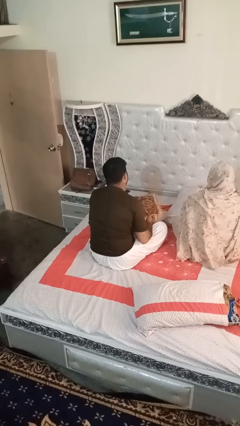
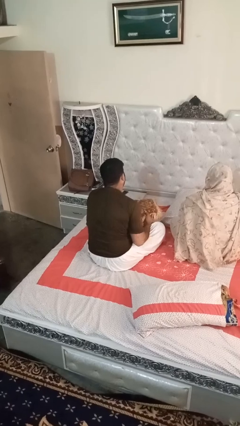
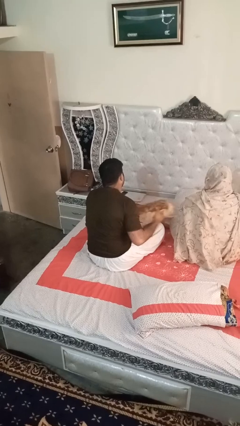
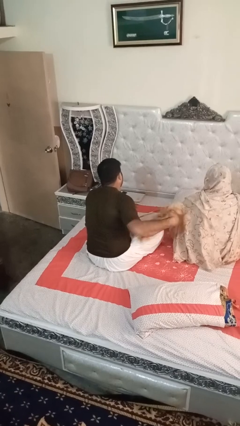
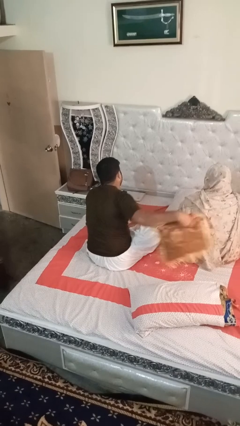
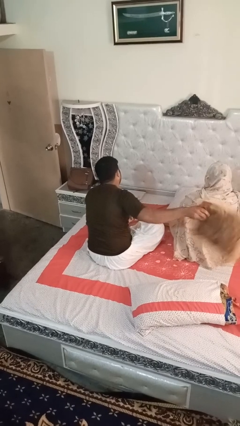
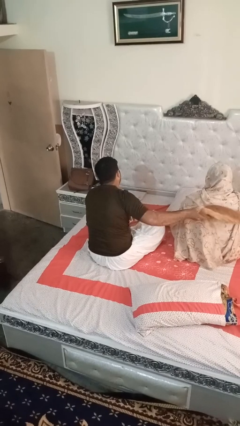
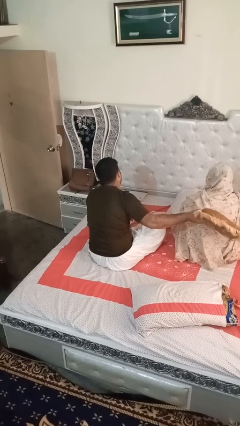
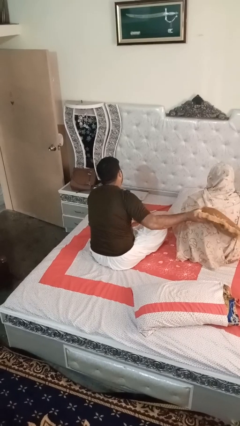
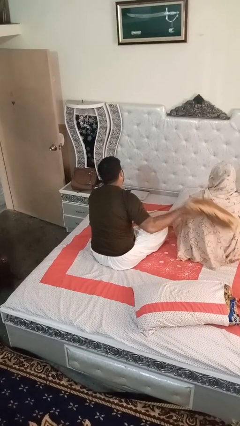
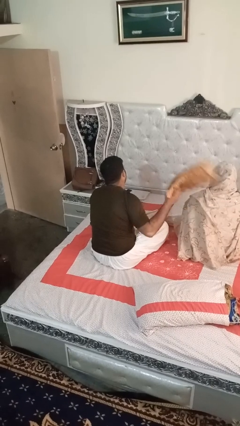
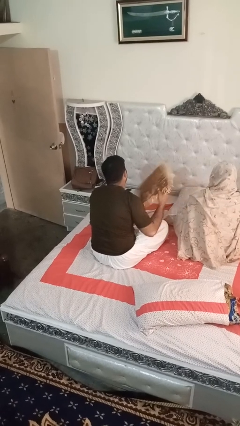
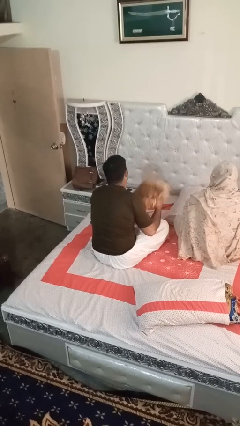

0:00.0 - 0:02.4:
person hits person with pillow

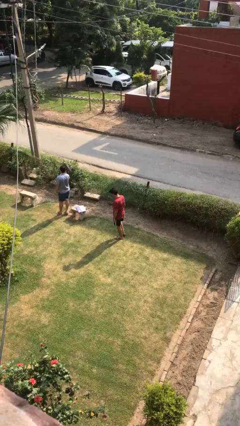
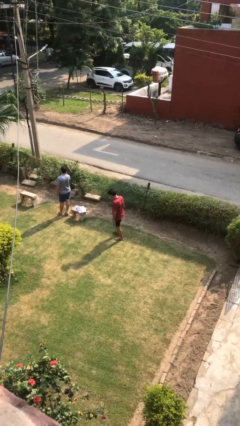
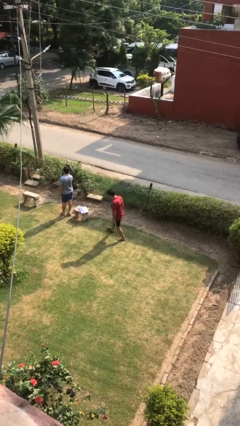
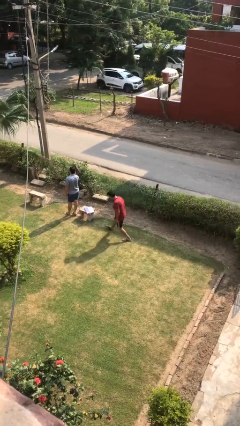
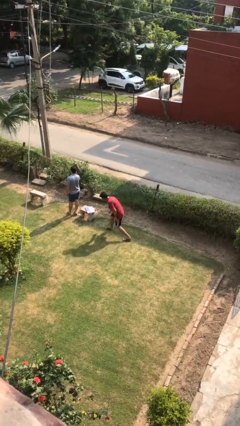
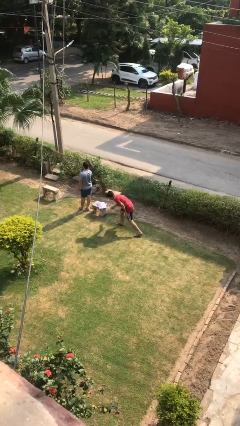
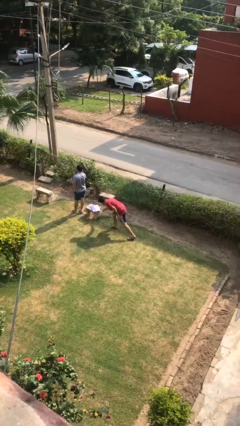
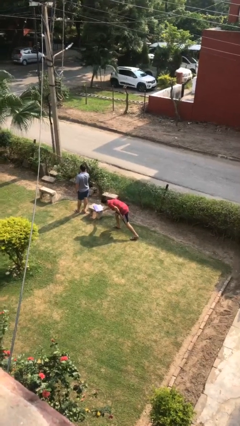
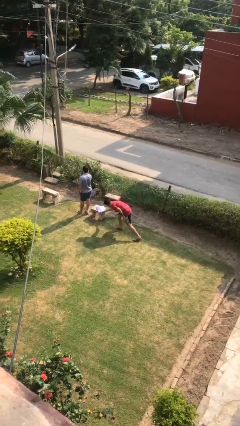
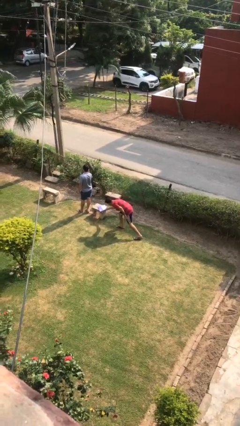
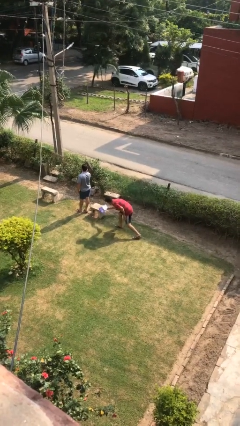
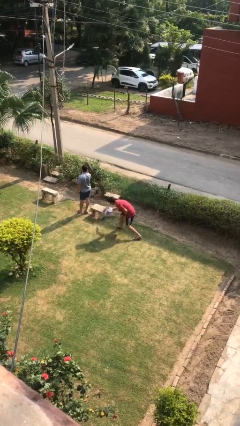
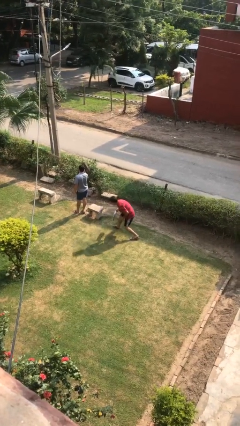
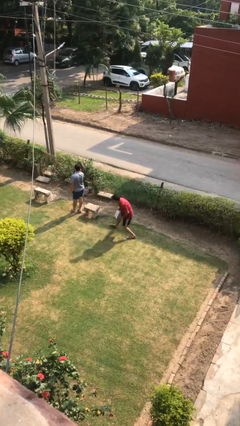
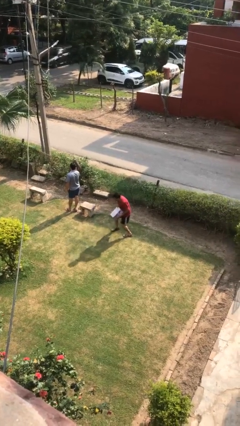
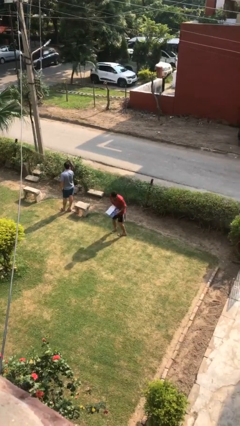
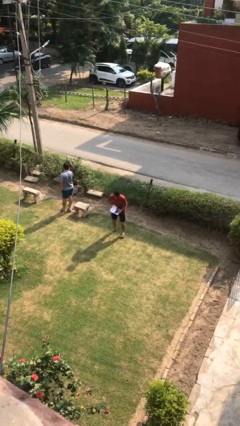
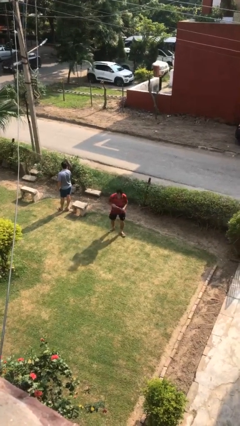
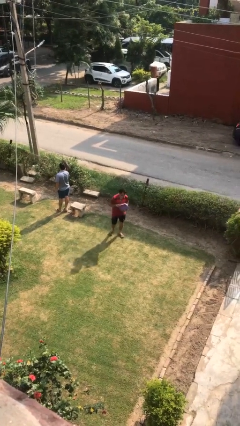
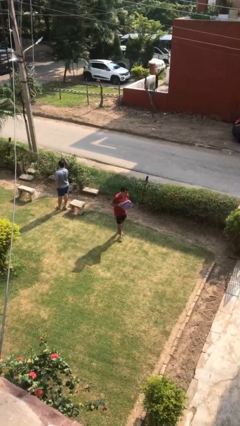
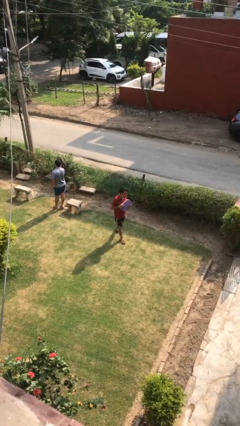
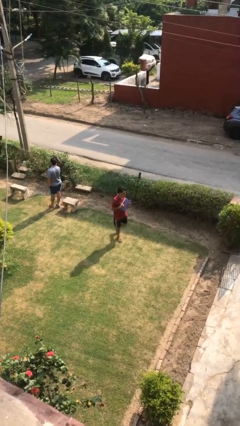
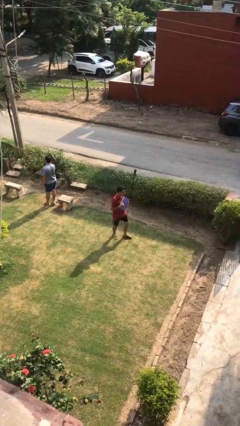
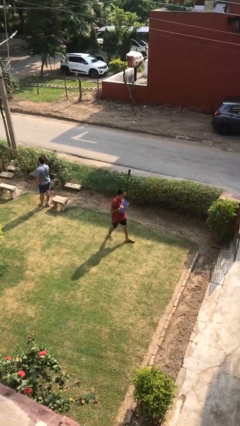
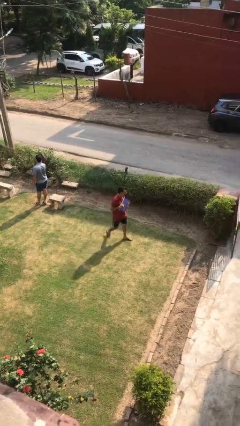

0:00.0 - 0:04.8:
person steals object from person

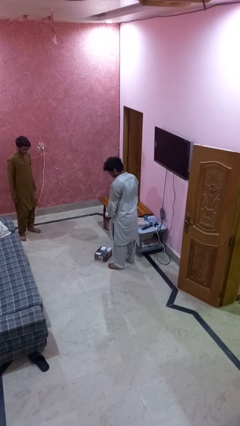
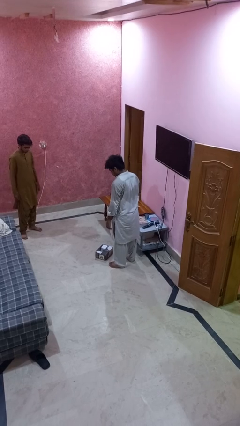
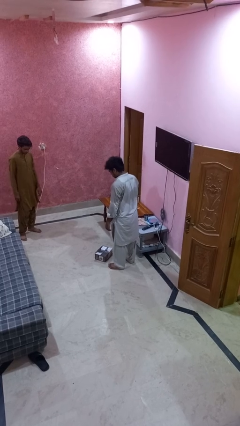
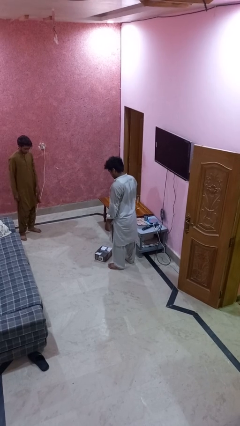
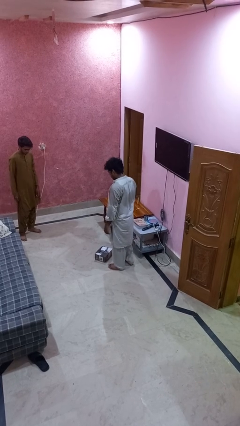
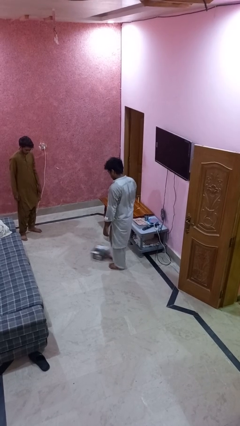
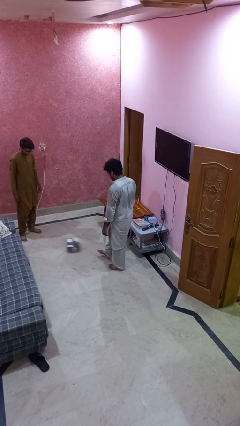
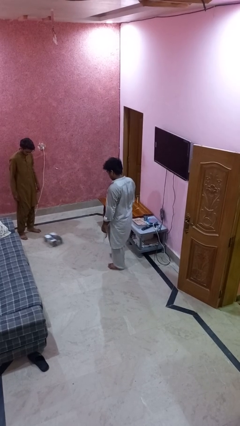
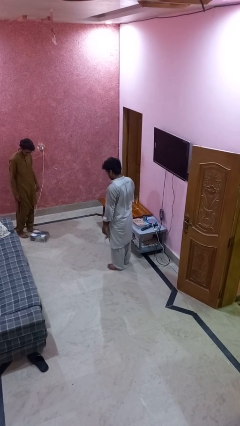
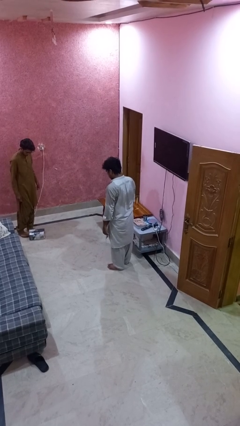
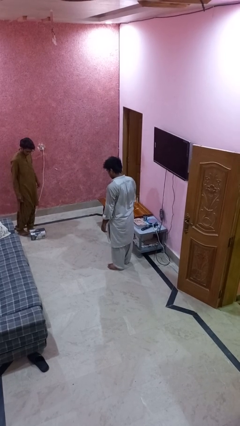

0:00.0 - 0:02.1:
person kicks object to person

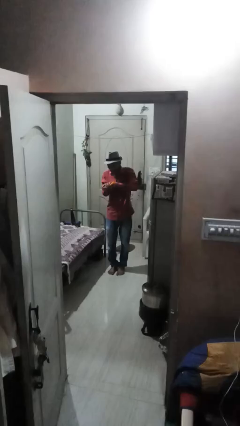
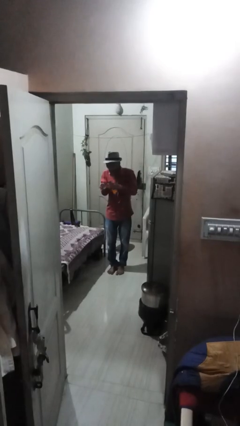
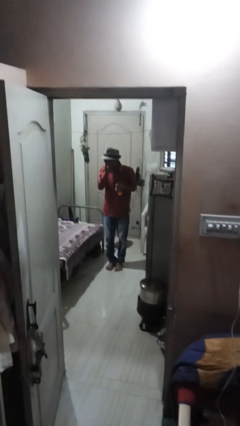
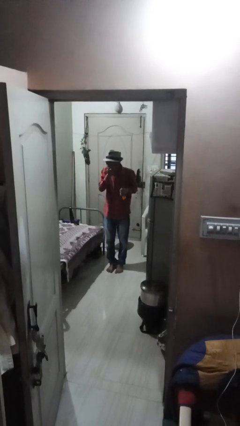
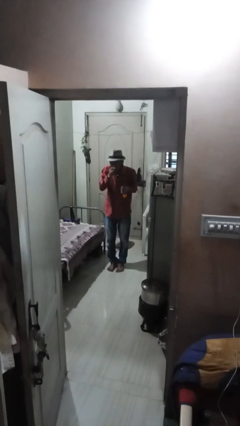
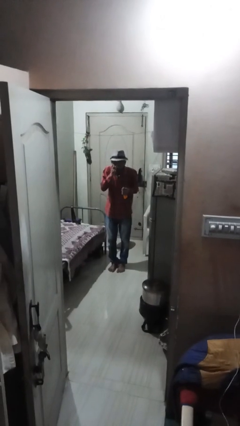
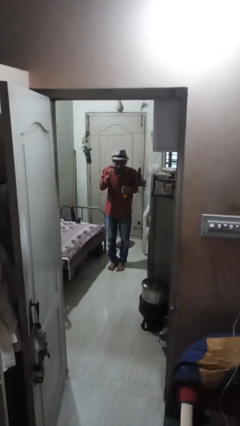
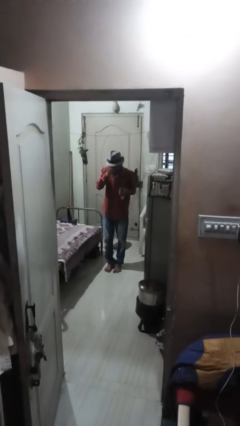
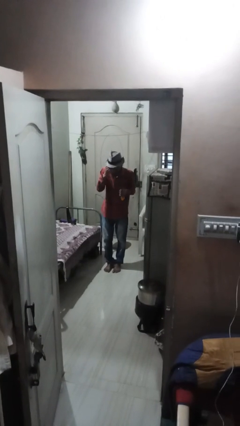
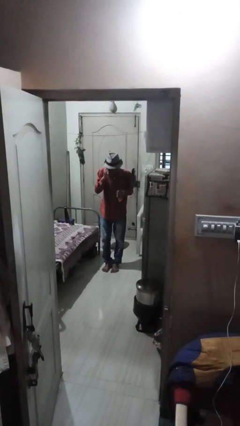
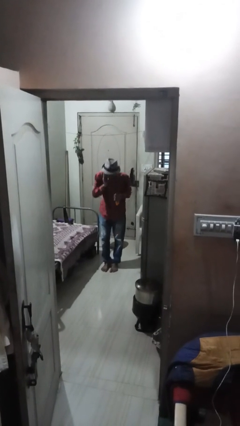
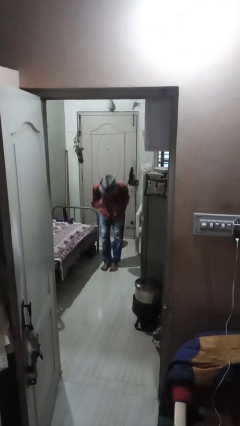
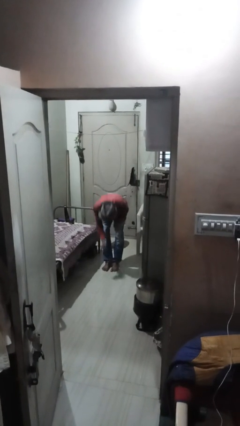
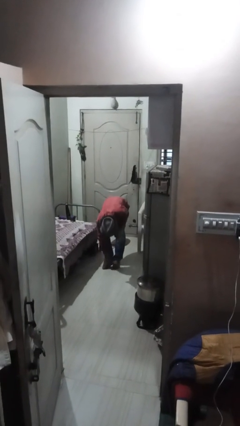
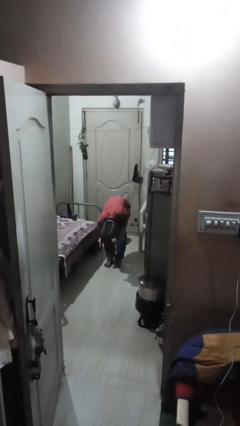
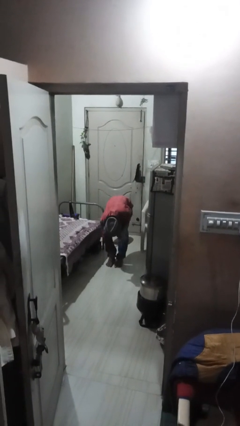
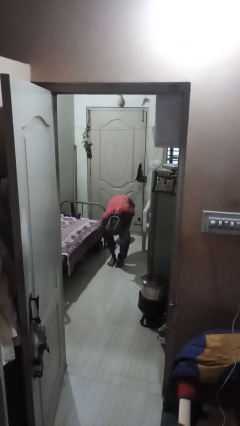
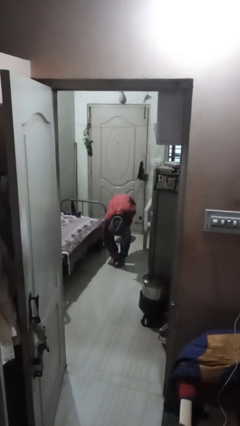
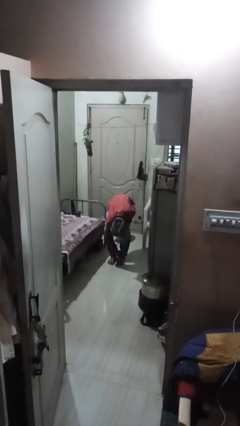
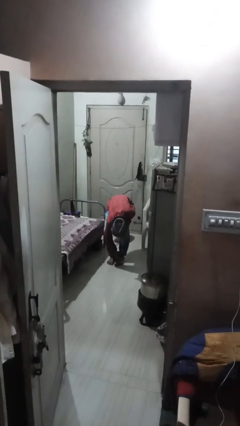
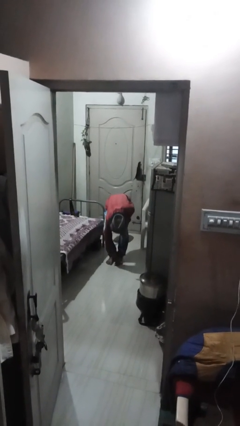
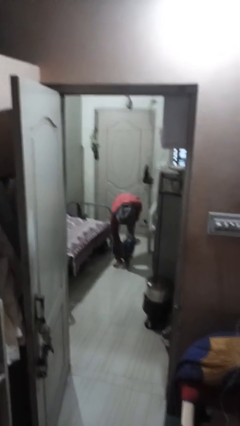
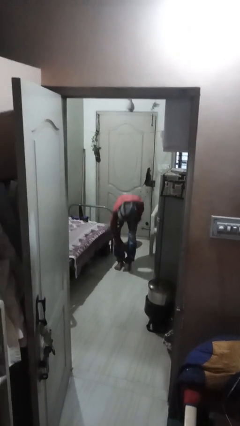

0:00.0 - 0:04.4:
person applies sunscreen

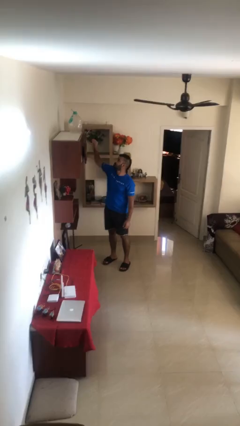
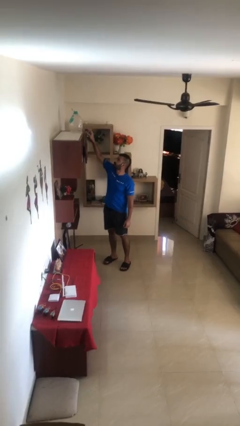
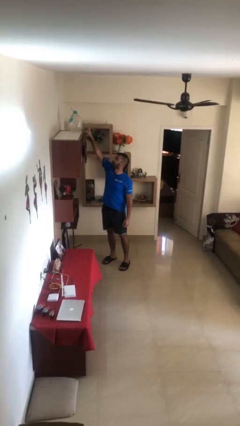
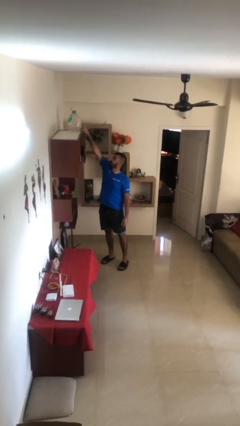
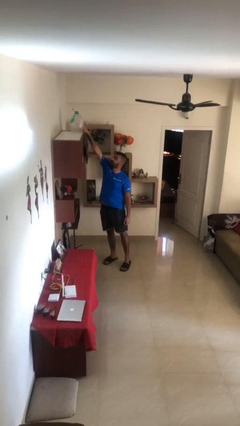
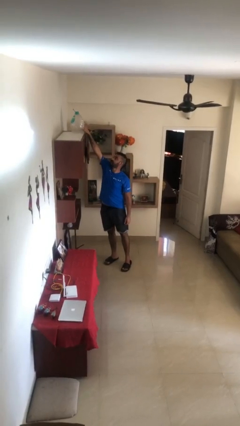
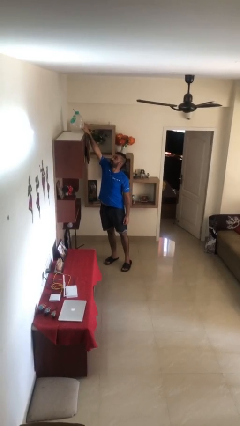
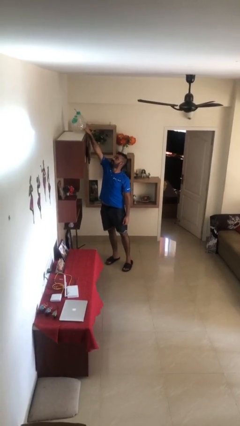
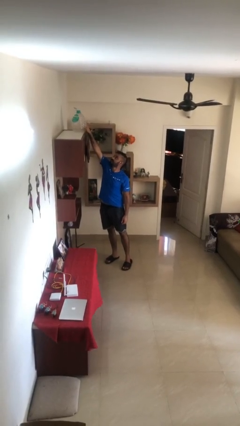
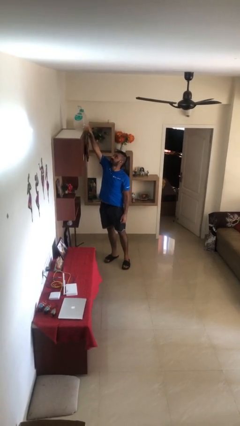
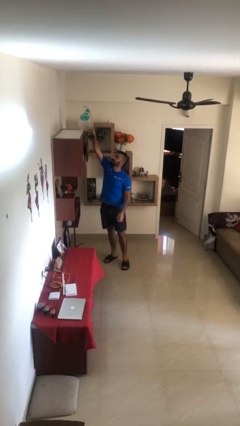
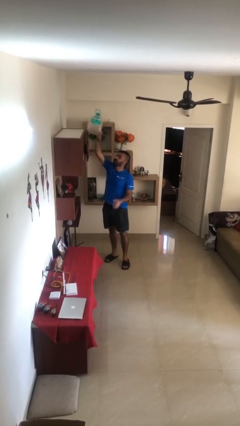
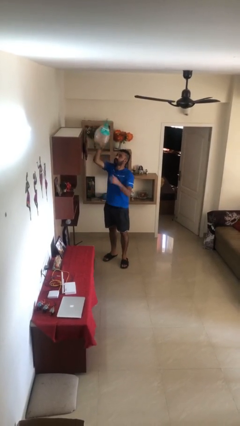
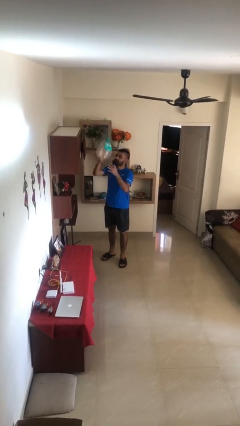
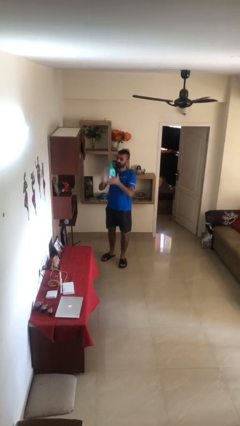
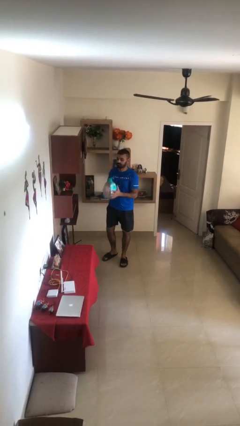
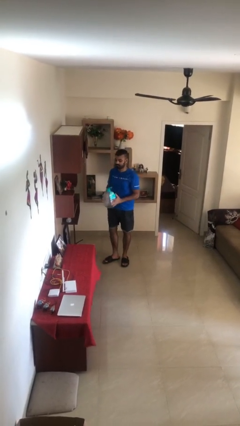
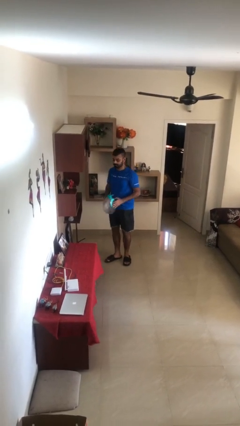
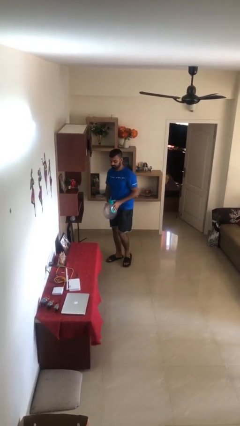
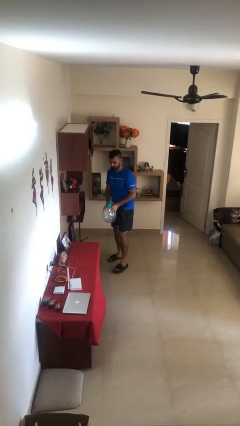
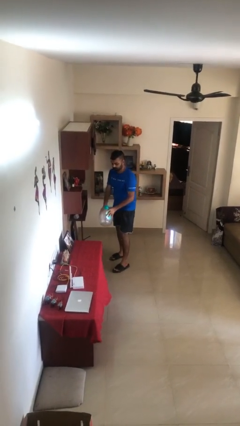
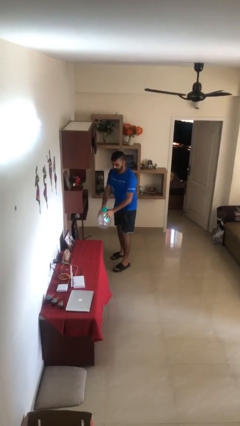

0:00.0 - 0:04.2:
person picks up object from shelf
